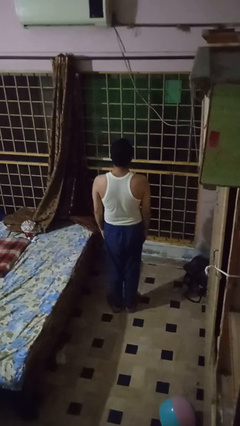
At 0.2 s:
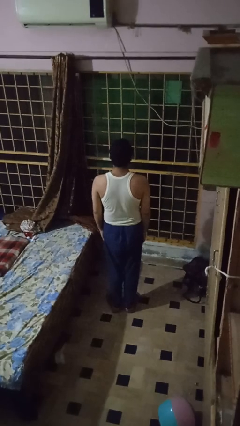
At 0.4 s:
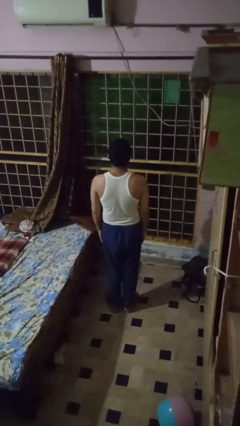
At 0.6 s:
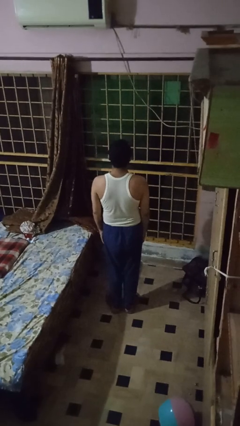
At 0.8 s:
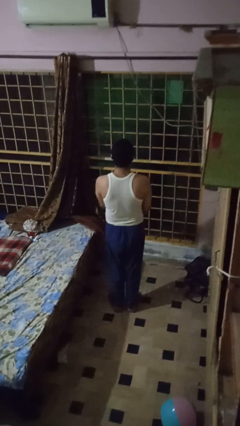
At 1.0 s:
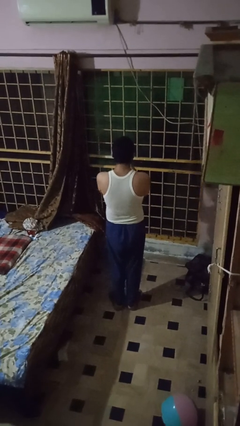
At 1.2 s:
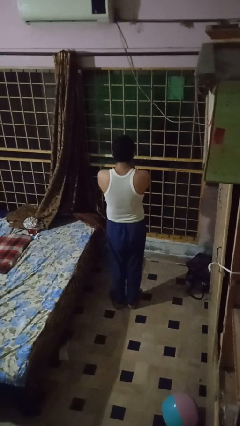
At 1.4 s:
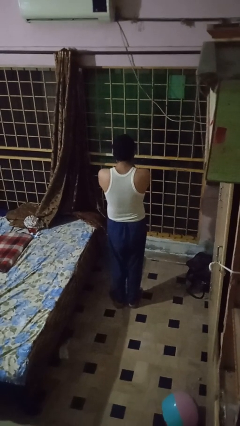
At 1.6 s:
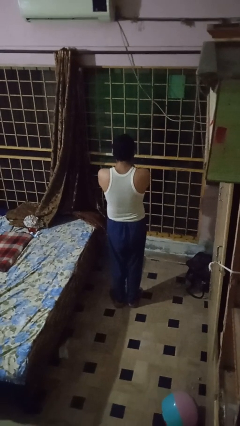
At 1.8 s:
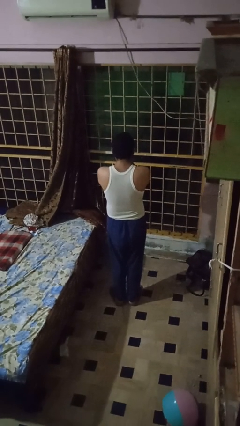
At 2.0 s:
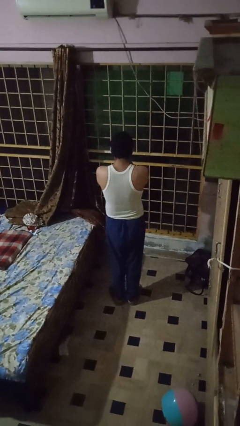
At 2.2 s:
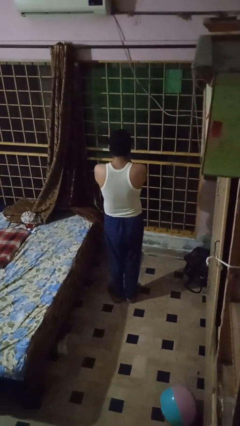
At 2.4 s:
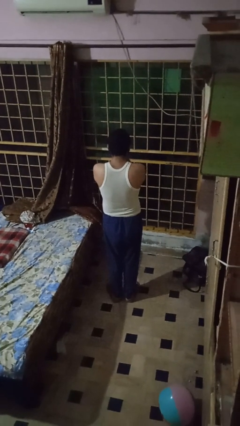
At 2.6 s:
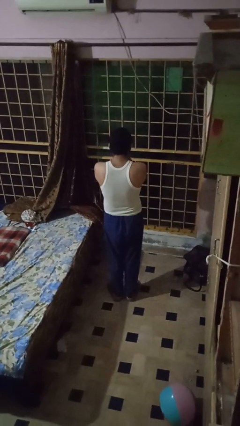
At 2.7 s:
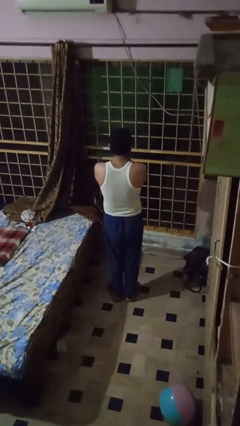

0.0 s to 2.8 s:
person covers face with hands

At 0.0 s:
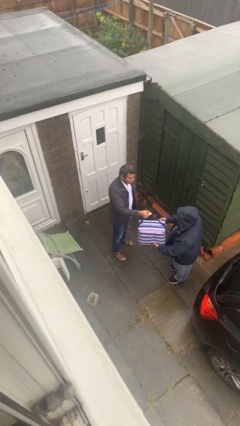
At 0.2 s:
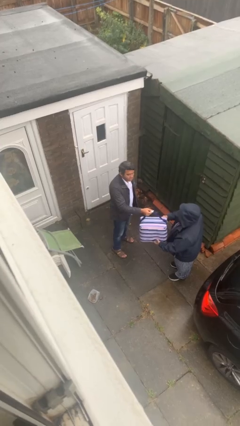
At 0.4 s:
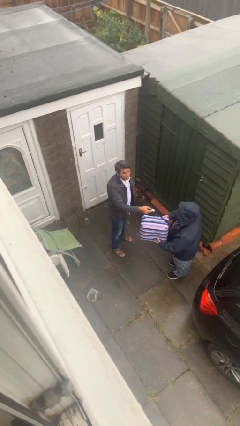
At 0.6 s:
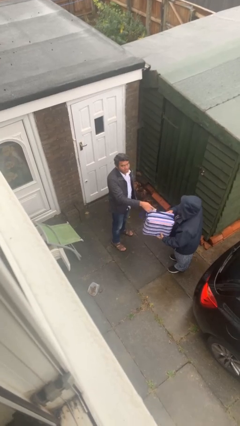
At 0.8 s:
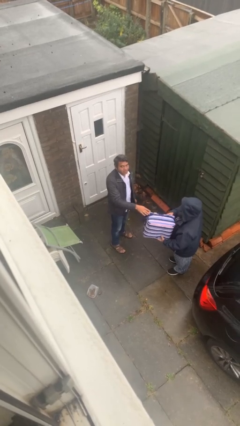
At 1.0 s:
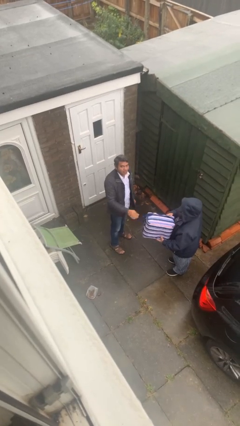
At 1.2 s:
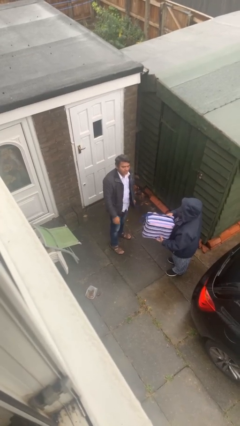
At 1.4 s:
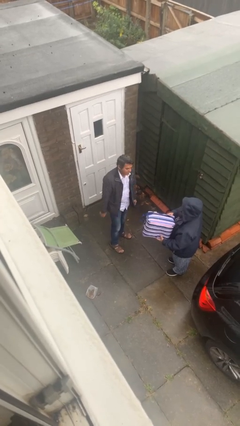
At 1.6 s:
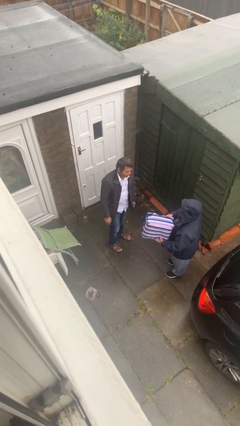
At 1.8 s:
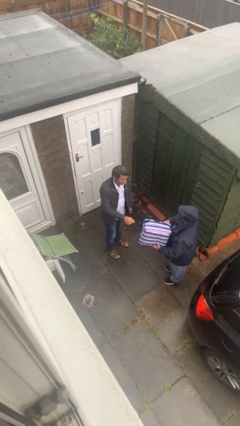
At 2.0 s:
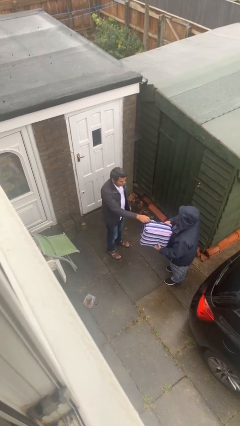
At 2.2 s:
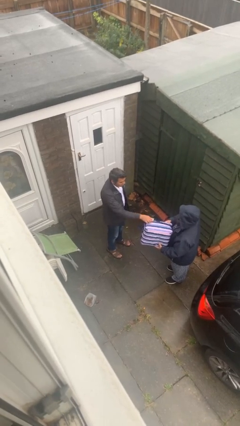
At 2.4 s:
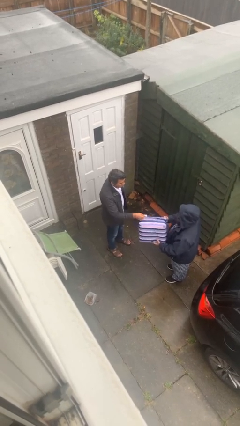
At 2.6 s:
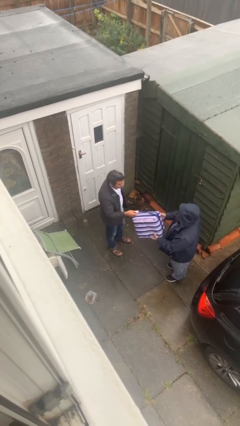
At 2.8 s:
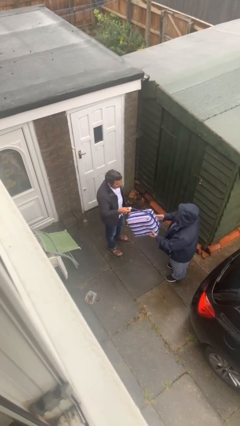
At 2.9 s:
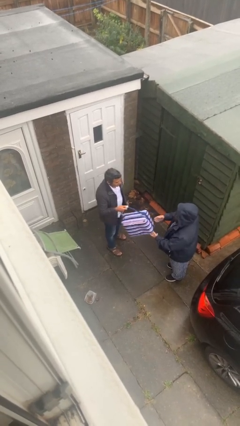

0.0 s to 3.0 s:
person transfers object to person

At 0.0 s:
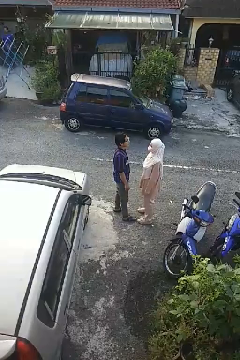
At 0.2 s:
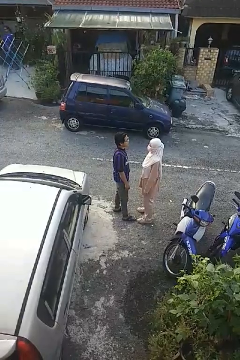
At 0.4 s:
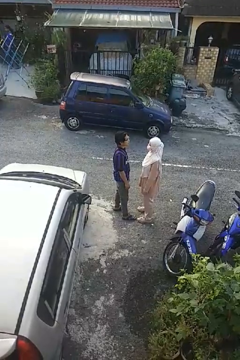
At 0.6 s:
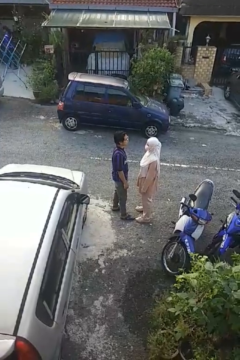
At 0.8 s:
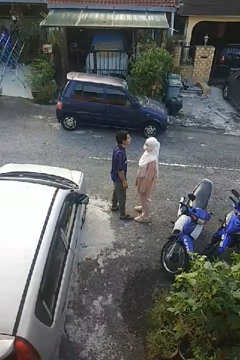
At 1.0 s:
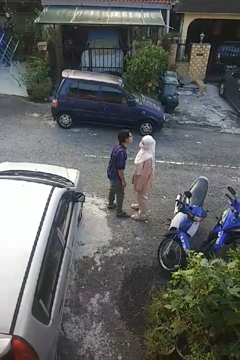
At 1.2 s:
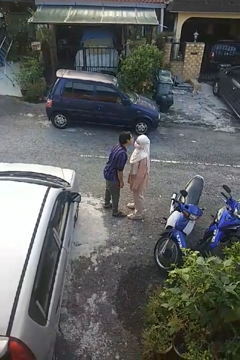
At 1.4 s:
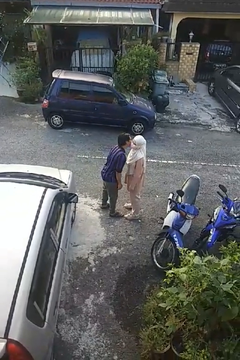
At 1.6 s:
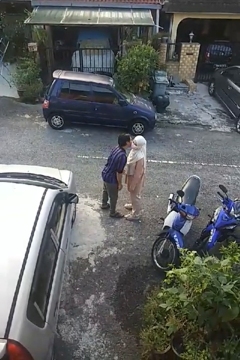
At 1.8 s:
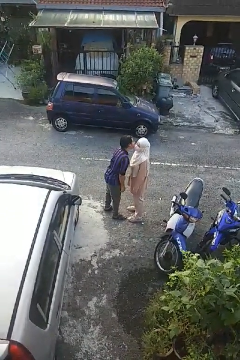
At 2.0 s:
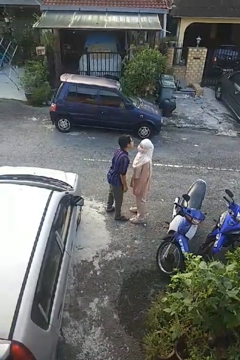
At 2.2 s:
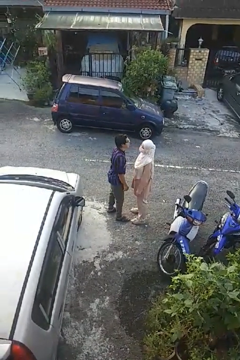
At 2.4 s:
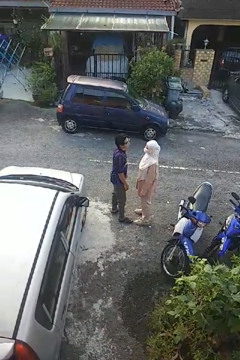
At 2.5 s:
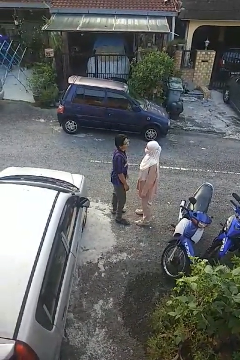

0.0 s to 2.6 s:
person kisses cheek of person

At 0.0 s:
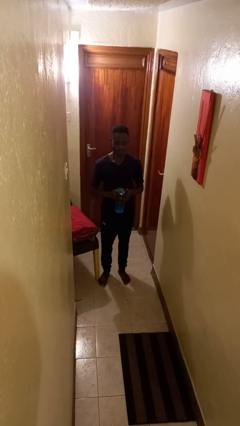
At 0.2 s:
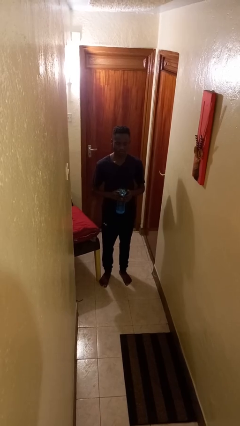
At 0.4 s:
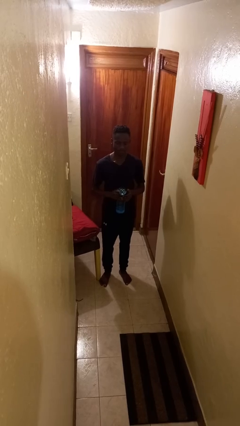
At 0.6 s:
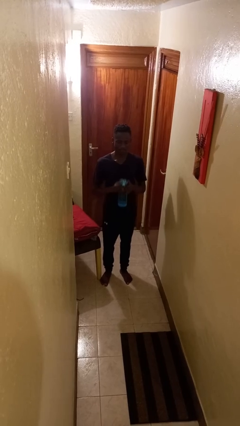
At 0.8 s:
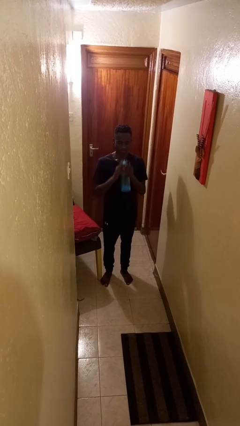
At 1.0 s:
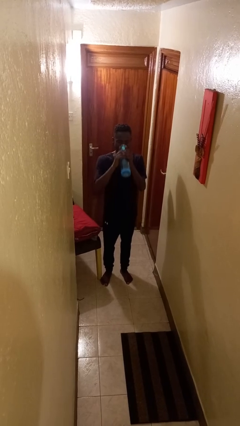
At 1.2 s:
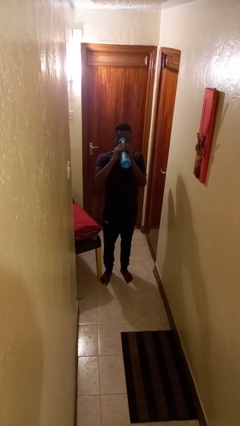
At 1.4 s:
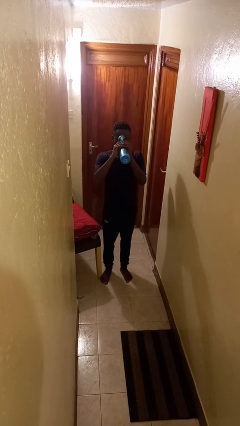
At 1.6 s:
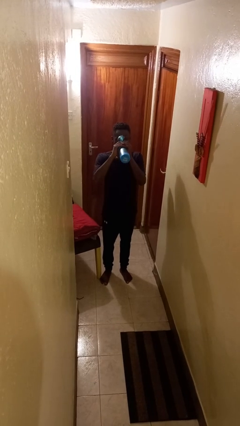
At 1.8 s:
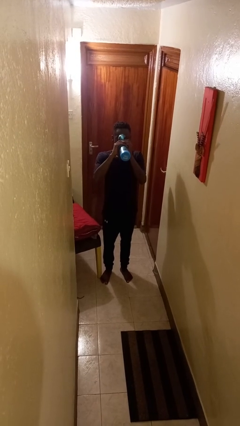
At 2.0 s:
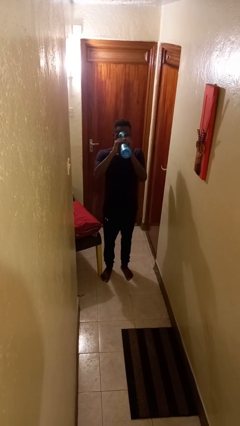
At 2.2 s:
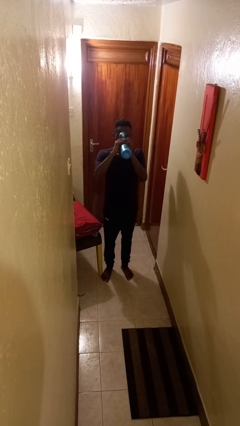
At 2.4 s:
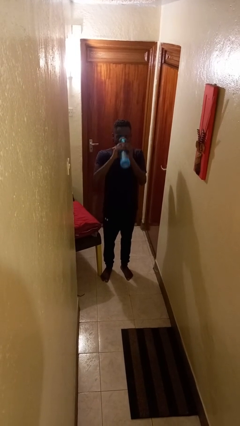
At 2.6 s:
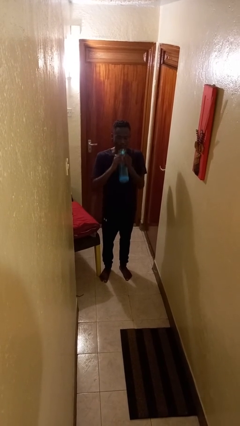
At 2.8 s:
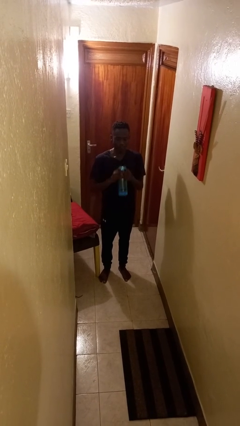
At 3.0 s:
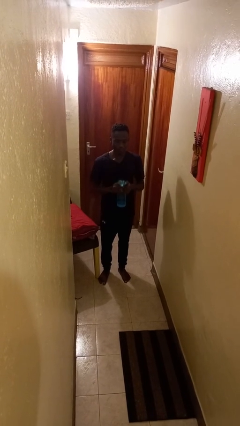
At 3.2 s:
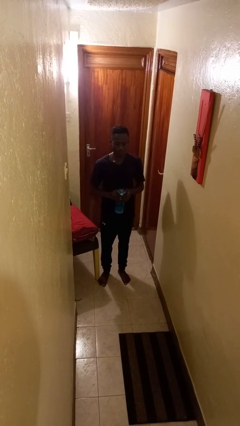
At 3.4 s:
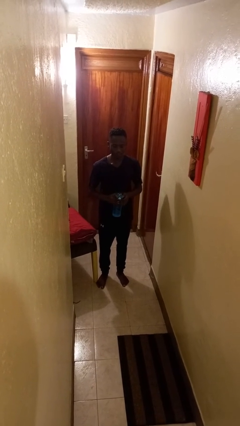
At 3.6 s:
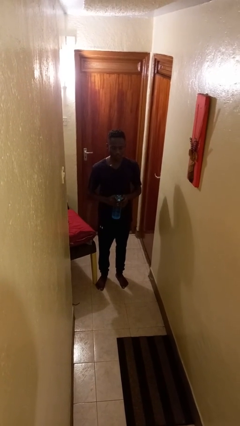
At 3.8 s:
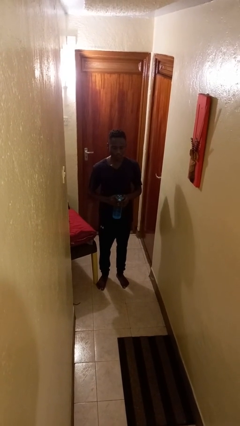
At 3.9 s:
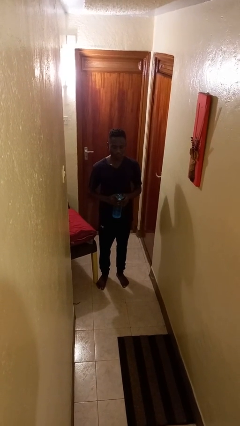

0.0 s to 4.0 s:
person drinks from bottle

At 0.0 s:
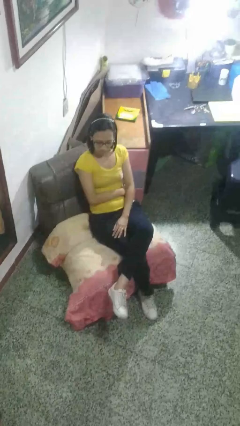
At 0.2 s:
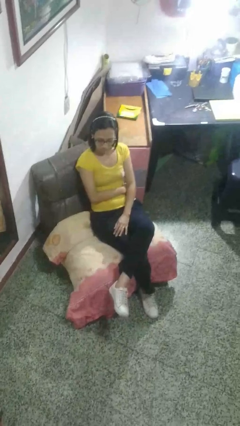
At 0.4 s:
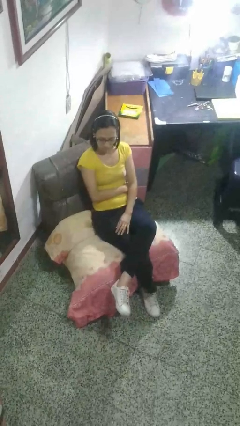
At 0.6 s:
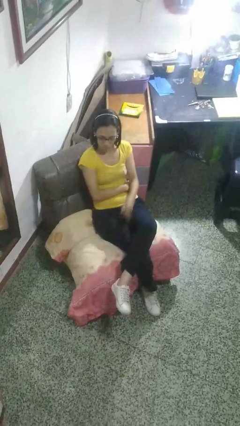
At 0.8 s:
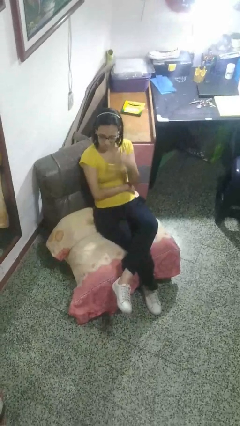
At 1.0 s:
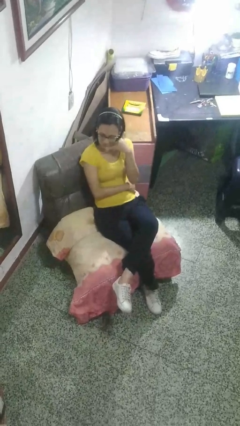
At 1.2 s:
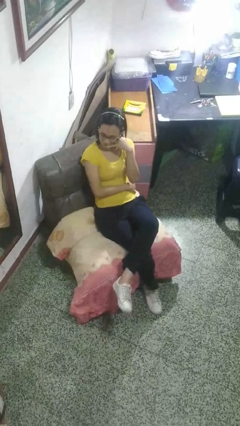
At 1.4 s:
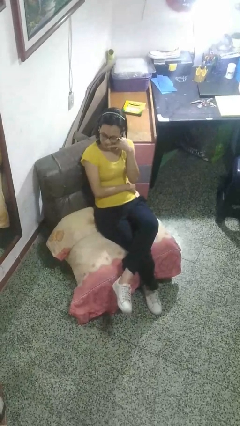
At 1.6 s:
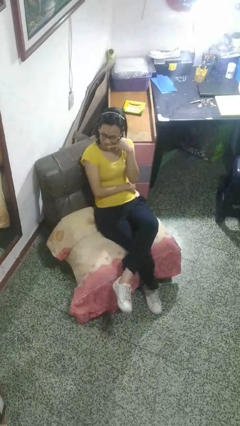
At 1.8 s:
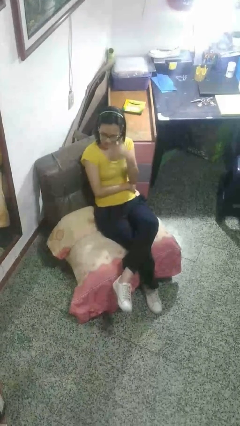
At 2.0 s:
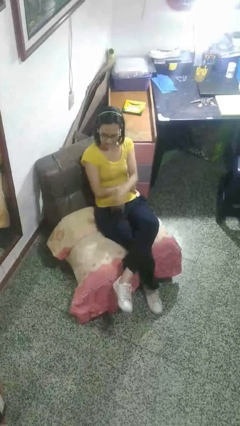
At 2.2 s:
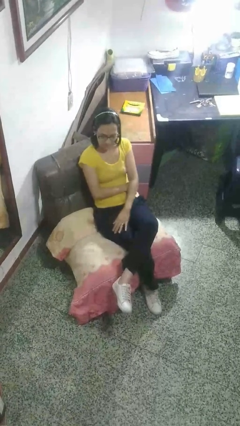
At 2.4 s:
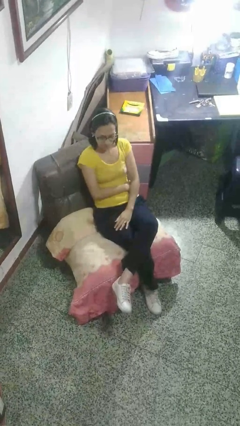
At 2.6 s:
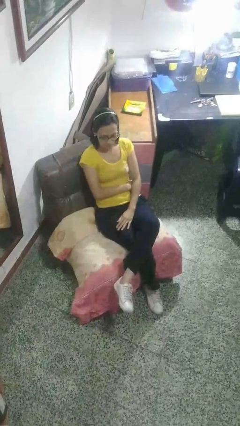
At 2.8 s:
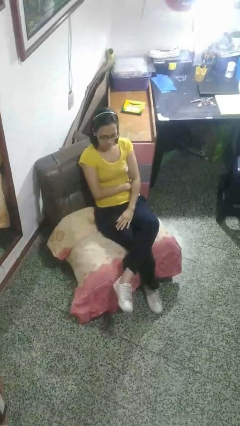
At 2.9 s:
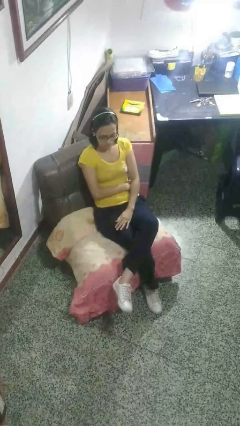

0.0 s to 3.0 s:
person gestures call me

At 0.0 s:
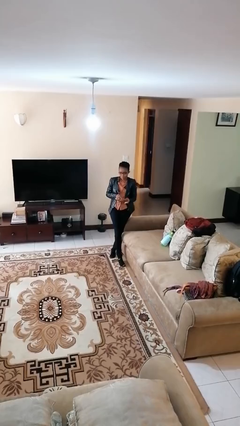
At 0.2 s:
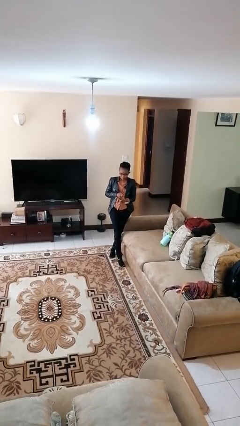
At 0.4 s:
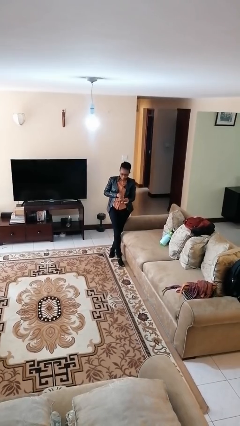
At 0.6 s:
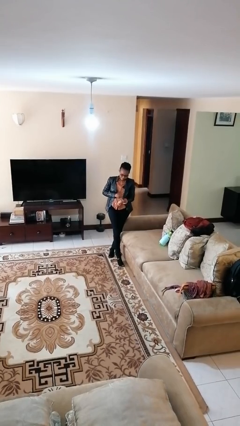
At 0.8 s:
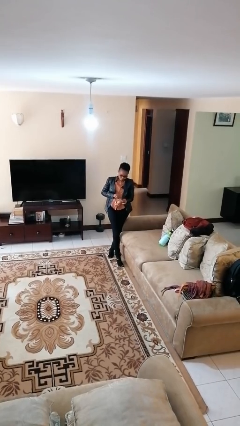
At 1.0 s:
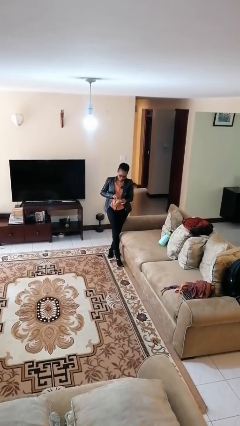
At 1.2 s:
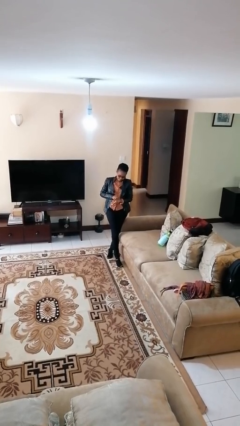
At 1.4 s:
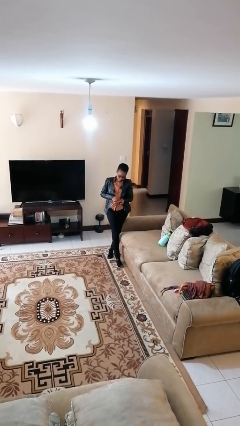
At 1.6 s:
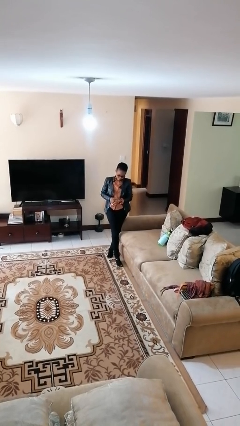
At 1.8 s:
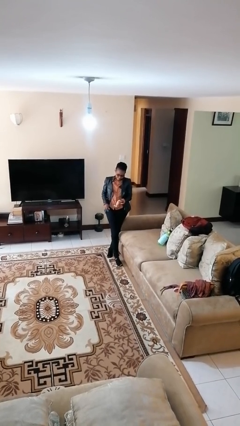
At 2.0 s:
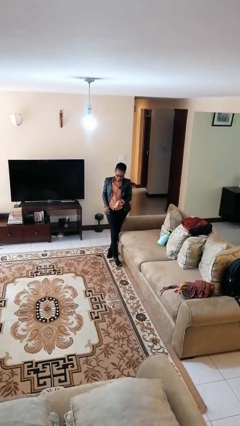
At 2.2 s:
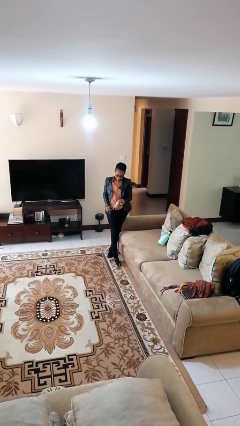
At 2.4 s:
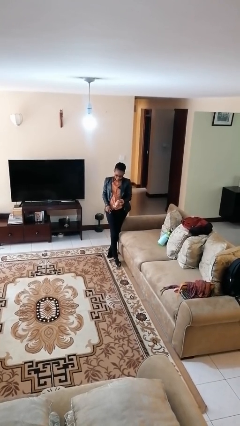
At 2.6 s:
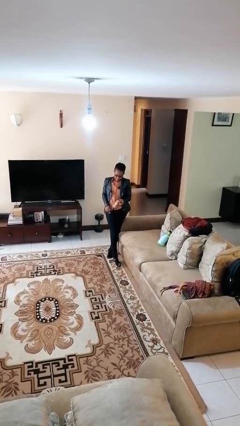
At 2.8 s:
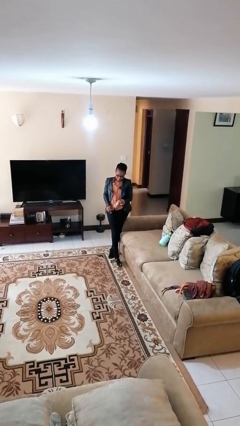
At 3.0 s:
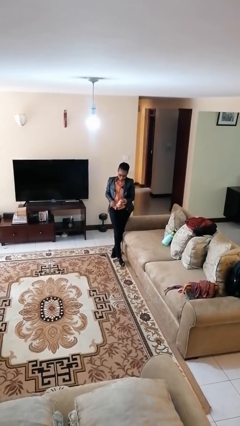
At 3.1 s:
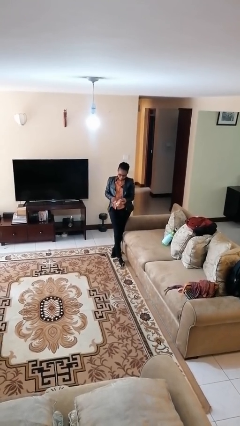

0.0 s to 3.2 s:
person puts on wristwatch
